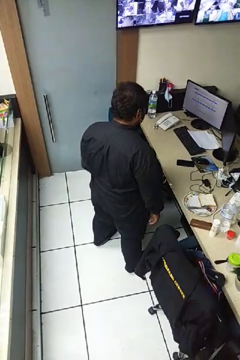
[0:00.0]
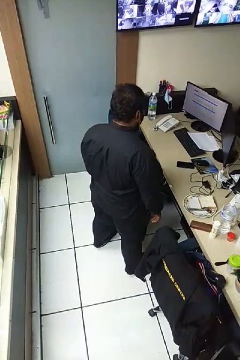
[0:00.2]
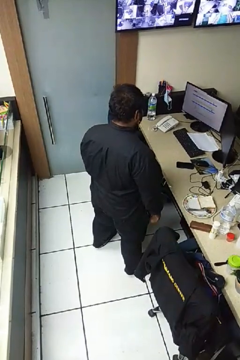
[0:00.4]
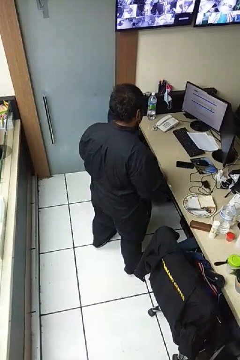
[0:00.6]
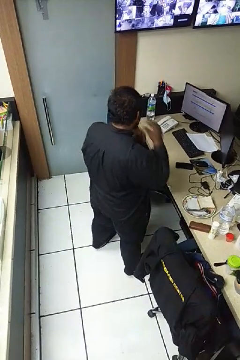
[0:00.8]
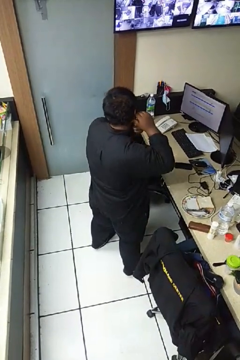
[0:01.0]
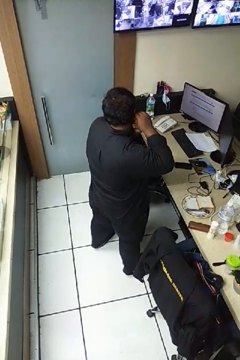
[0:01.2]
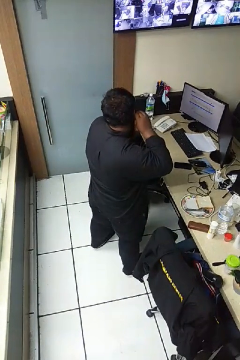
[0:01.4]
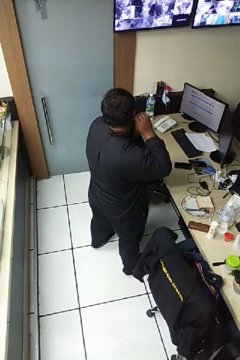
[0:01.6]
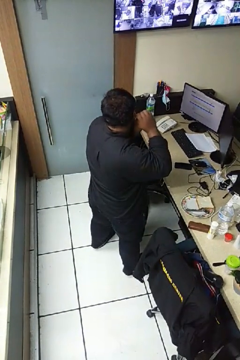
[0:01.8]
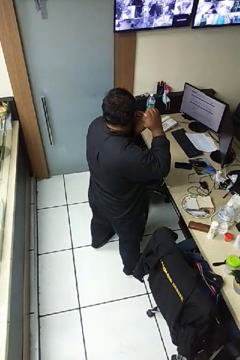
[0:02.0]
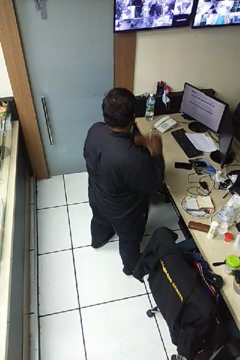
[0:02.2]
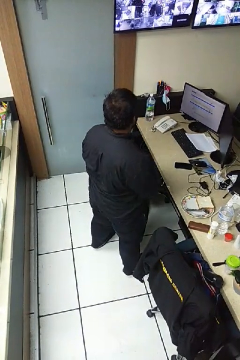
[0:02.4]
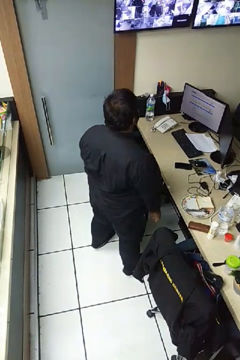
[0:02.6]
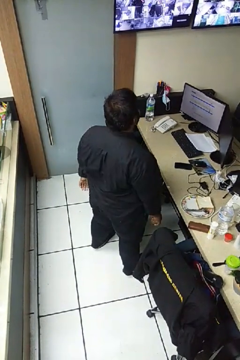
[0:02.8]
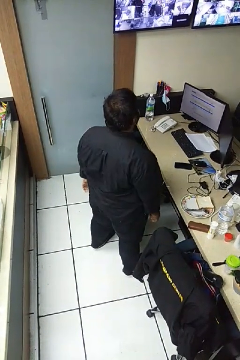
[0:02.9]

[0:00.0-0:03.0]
person takes off earrings

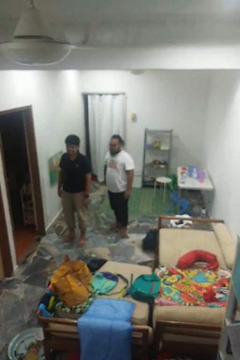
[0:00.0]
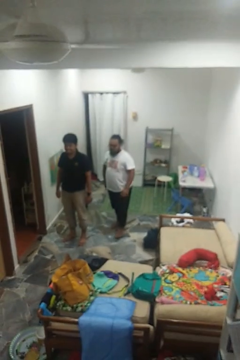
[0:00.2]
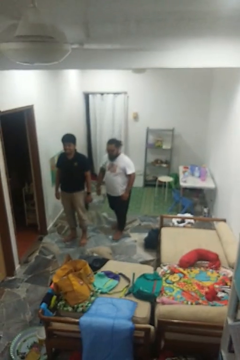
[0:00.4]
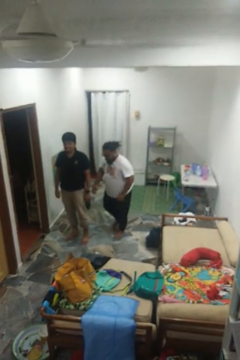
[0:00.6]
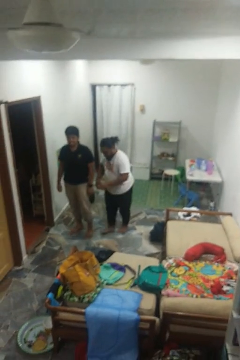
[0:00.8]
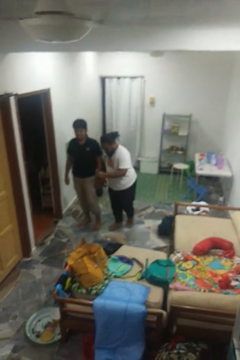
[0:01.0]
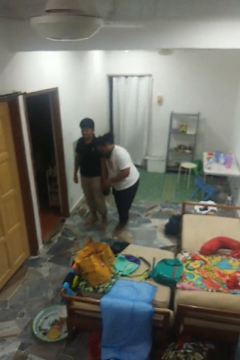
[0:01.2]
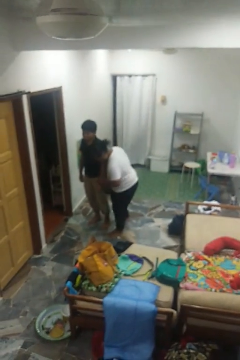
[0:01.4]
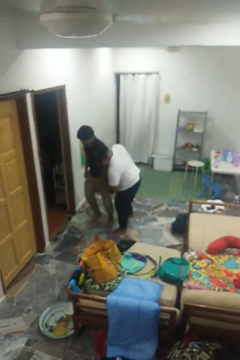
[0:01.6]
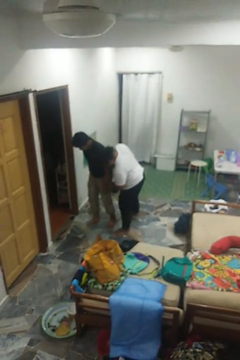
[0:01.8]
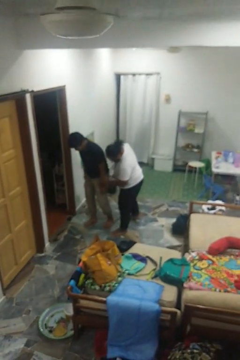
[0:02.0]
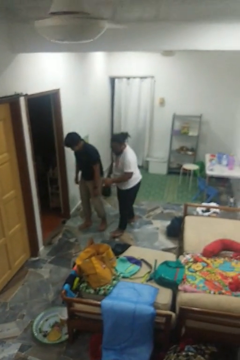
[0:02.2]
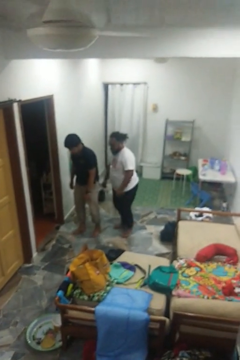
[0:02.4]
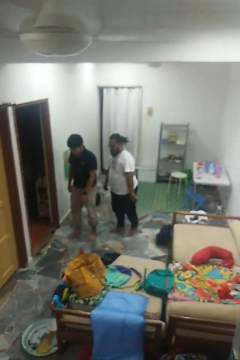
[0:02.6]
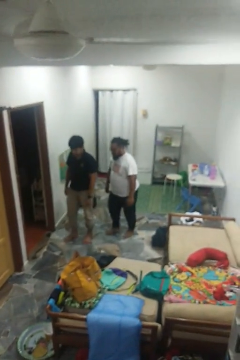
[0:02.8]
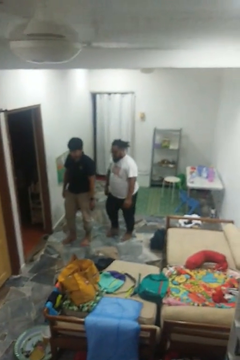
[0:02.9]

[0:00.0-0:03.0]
person bumps into person

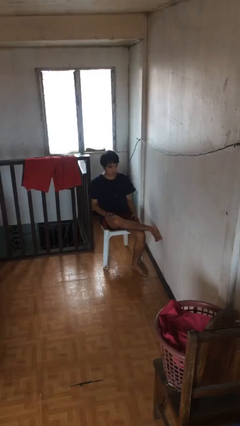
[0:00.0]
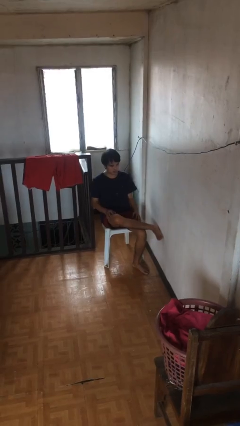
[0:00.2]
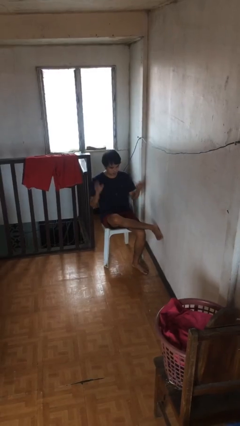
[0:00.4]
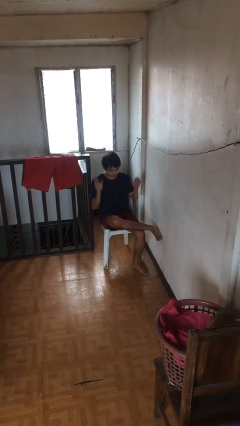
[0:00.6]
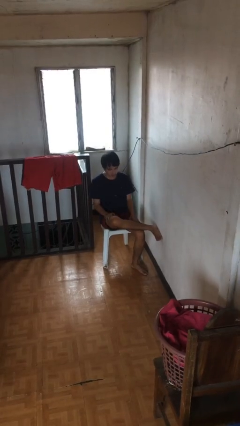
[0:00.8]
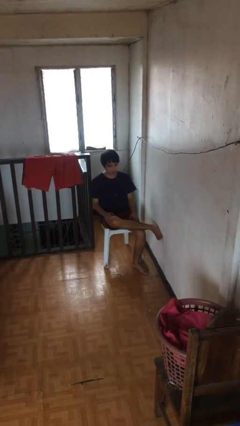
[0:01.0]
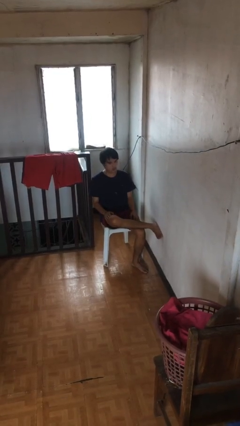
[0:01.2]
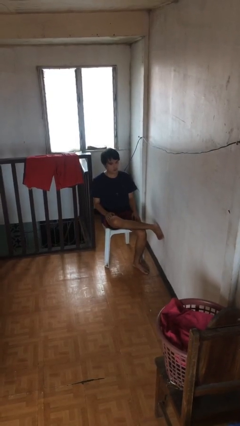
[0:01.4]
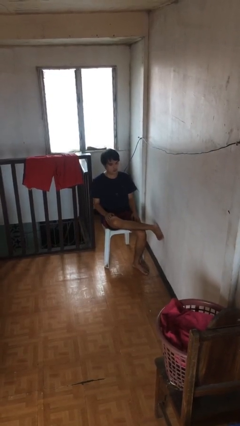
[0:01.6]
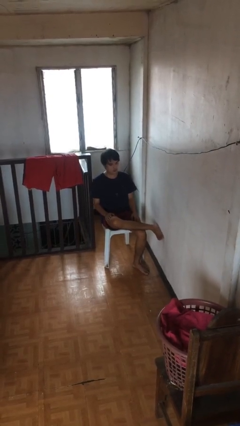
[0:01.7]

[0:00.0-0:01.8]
person slaps hands on thighs

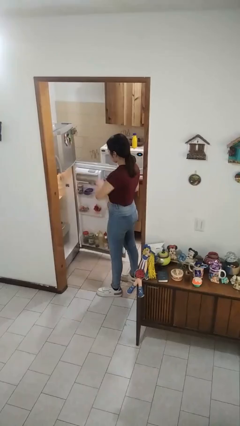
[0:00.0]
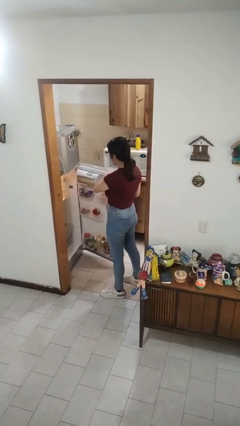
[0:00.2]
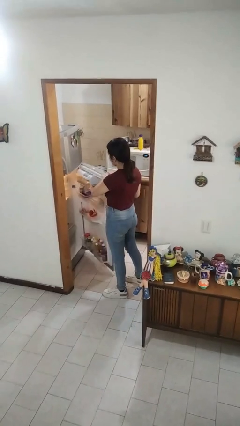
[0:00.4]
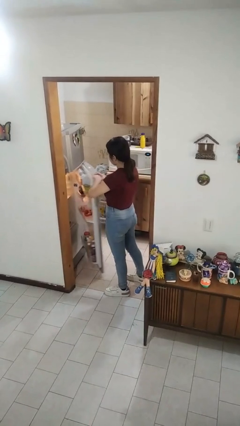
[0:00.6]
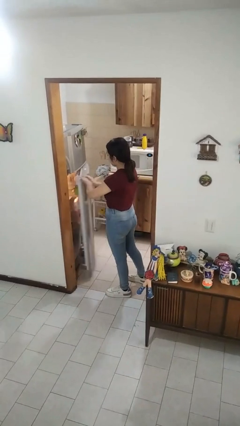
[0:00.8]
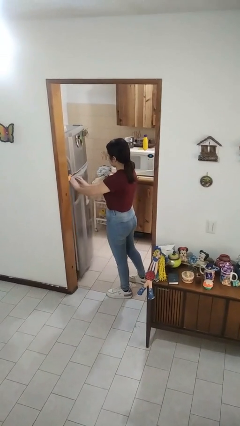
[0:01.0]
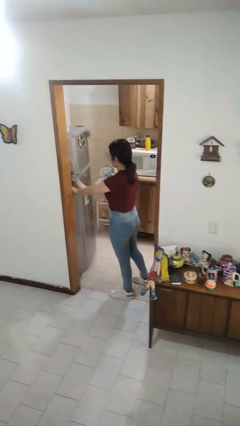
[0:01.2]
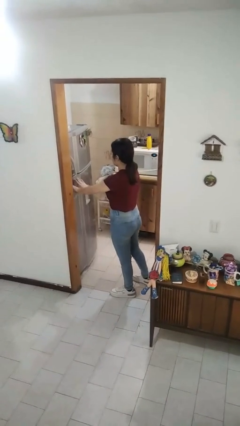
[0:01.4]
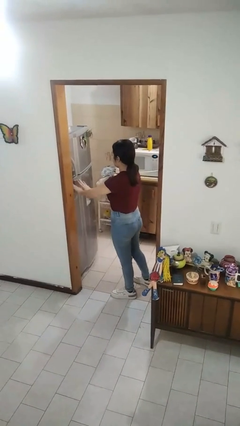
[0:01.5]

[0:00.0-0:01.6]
person closes refrigerator

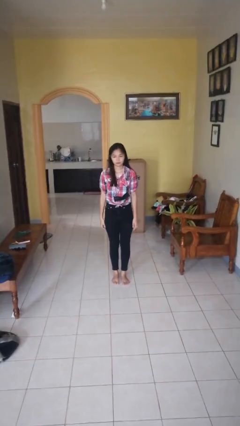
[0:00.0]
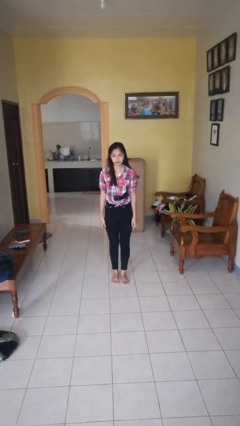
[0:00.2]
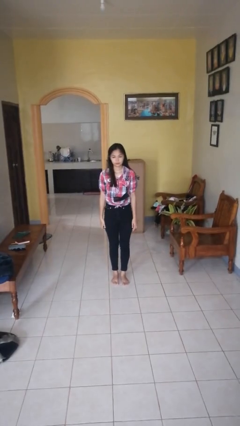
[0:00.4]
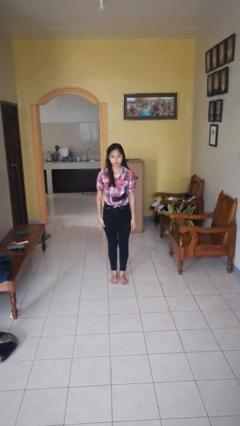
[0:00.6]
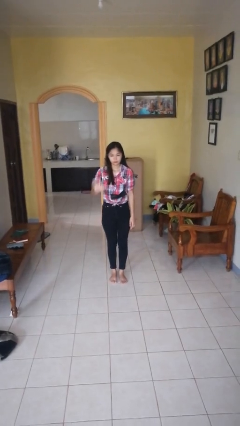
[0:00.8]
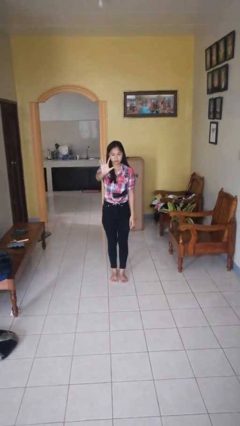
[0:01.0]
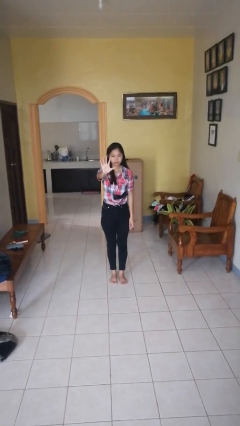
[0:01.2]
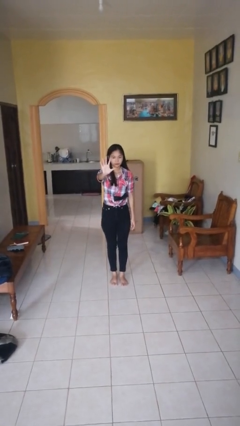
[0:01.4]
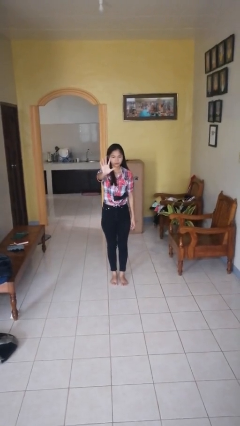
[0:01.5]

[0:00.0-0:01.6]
person gestures number five

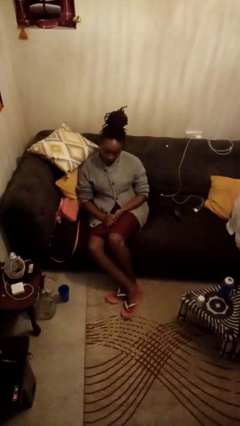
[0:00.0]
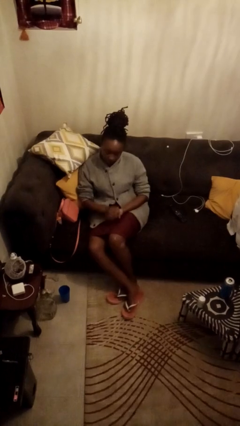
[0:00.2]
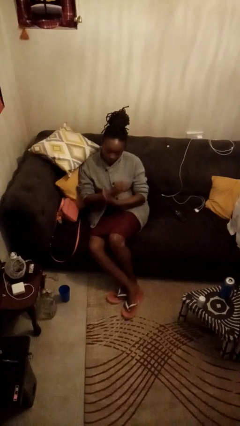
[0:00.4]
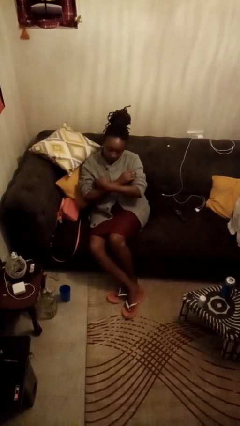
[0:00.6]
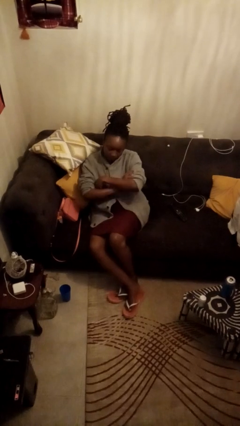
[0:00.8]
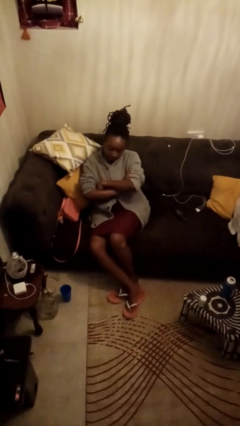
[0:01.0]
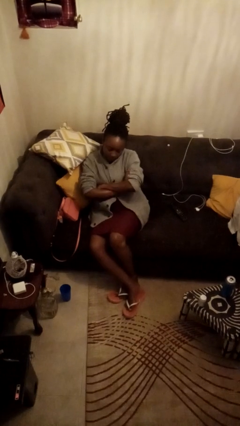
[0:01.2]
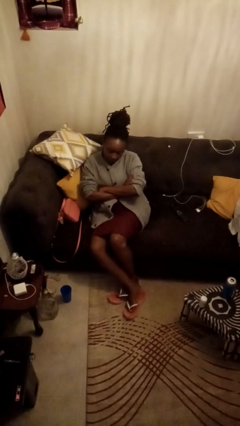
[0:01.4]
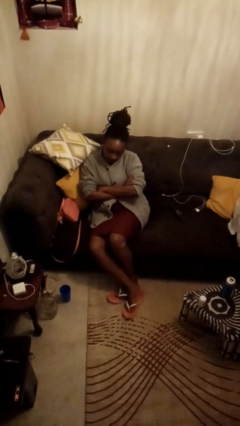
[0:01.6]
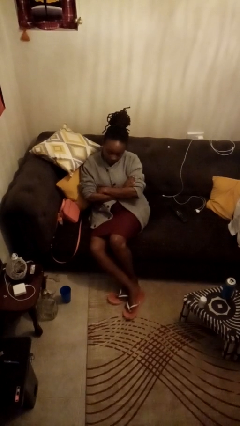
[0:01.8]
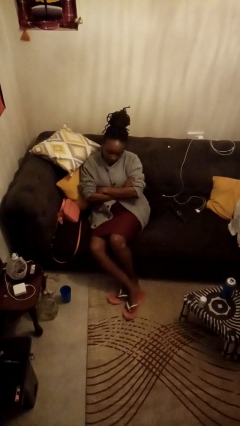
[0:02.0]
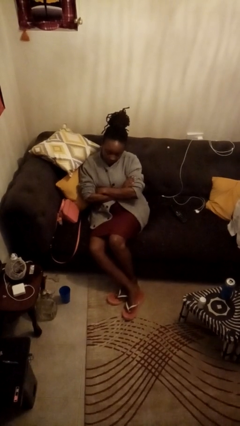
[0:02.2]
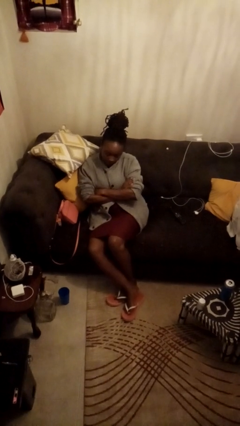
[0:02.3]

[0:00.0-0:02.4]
person crosses arms

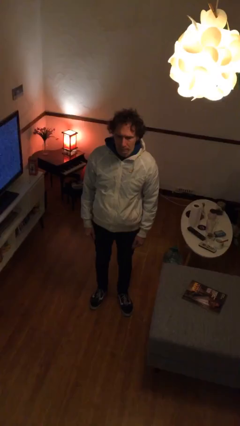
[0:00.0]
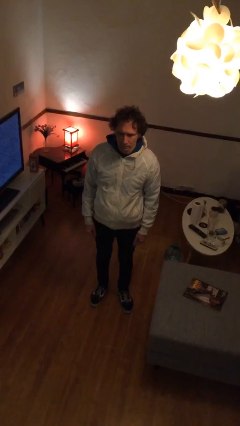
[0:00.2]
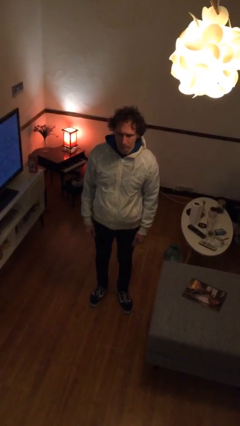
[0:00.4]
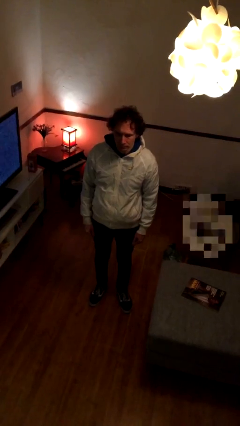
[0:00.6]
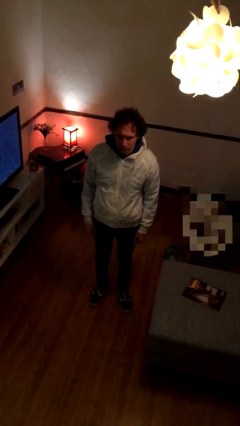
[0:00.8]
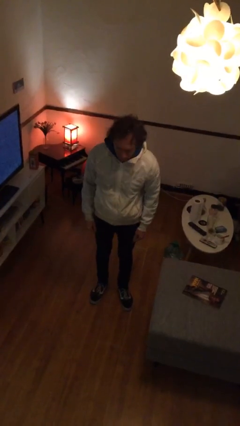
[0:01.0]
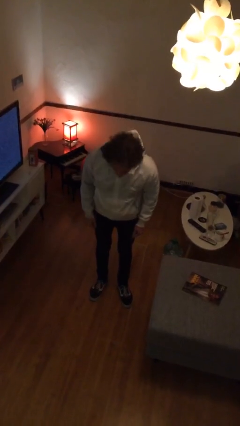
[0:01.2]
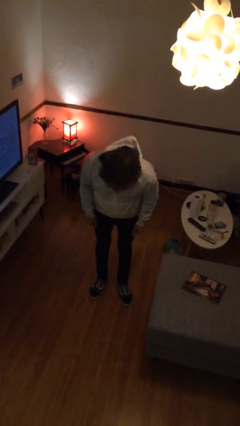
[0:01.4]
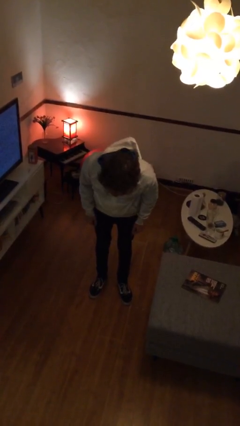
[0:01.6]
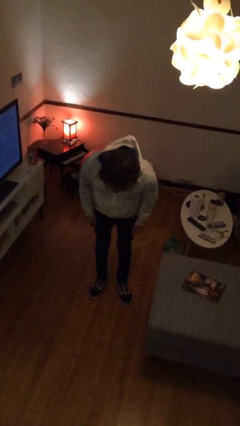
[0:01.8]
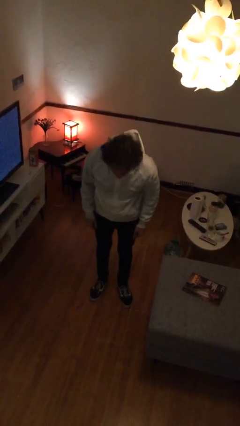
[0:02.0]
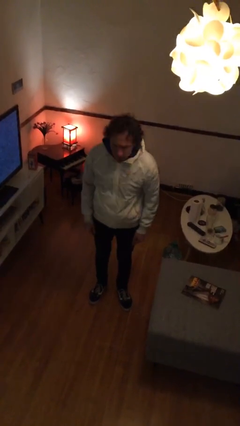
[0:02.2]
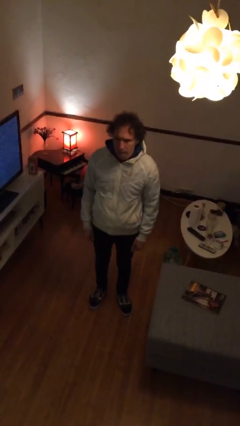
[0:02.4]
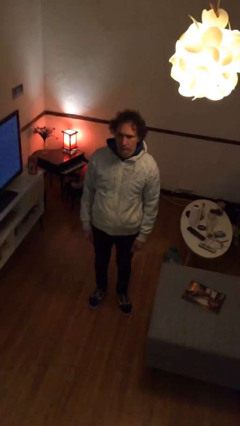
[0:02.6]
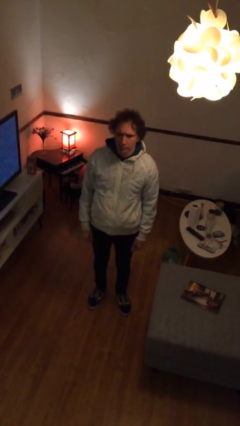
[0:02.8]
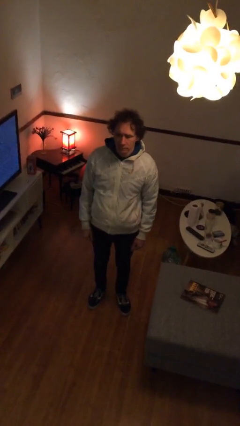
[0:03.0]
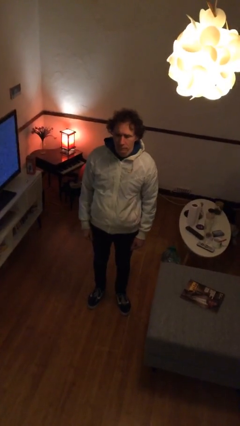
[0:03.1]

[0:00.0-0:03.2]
person bows

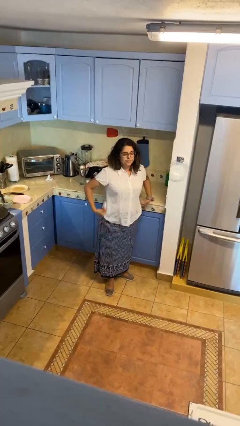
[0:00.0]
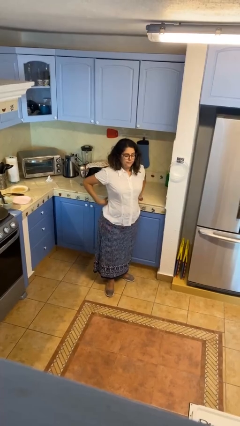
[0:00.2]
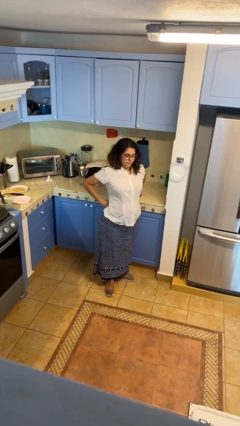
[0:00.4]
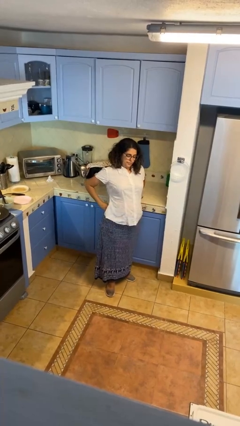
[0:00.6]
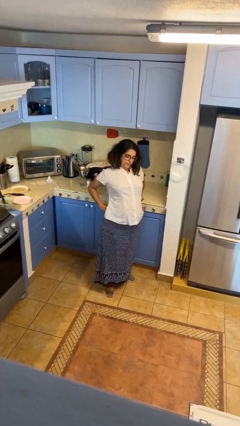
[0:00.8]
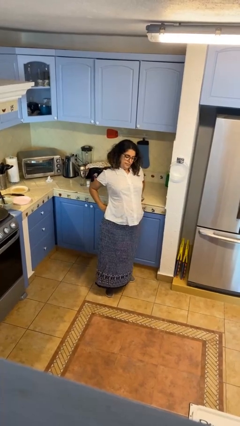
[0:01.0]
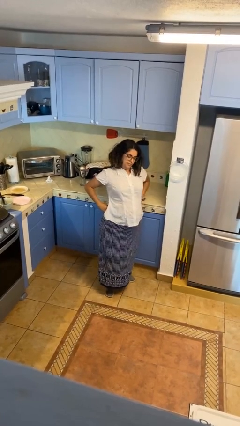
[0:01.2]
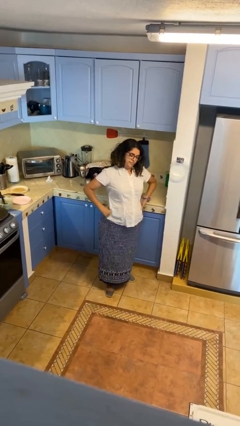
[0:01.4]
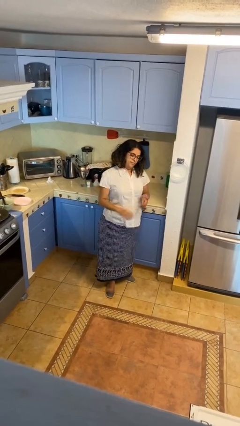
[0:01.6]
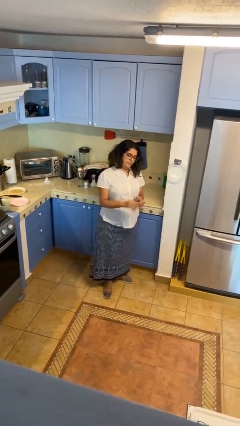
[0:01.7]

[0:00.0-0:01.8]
person stretches back
